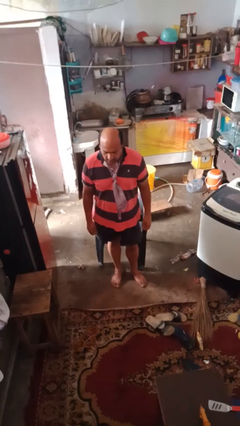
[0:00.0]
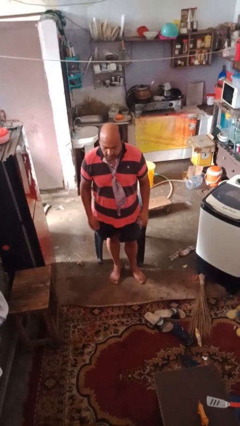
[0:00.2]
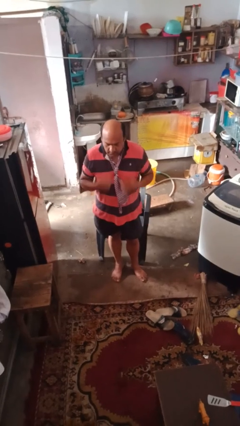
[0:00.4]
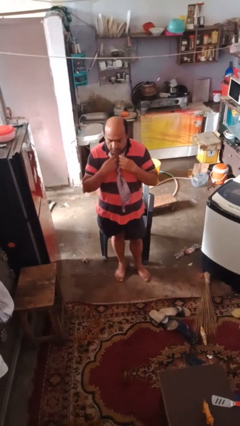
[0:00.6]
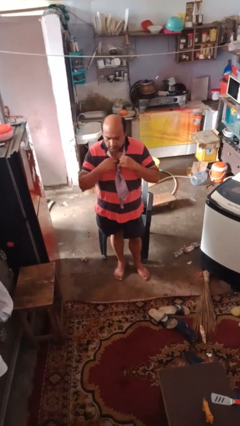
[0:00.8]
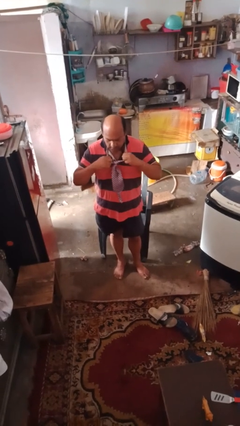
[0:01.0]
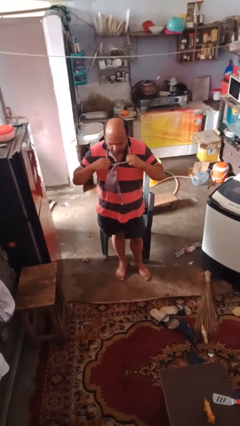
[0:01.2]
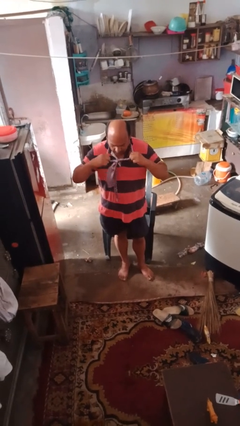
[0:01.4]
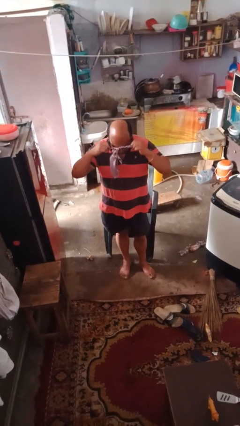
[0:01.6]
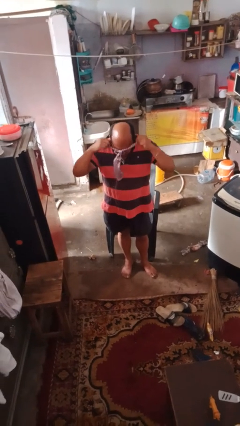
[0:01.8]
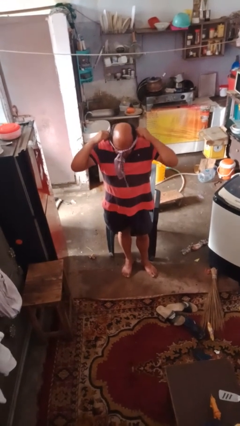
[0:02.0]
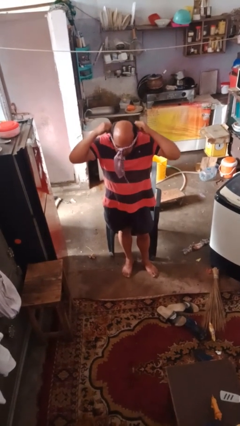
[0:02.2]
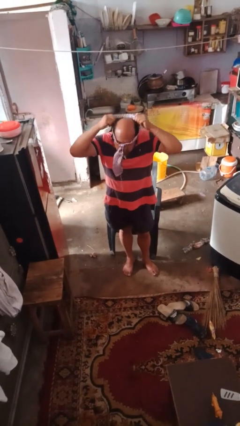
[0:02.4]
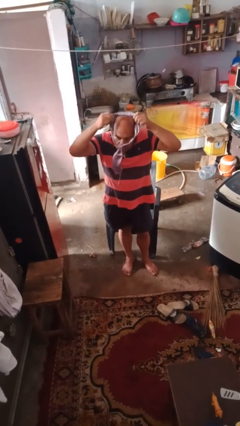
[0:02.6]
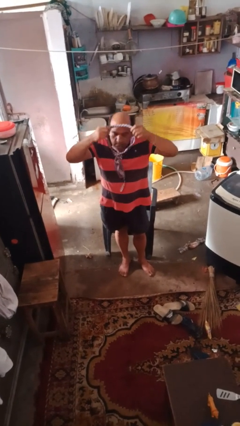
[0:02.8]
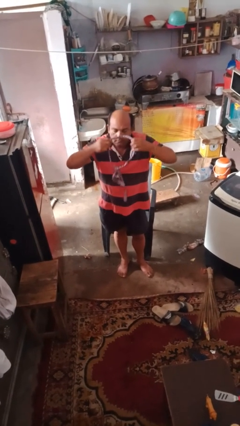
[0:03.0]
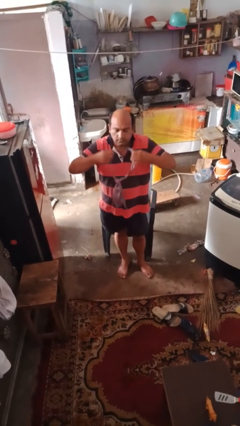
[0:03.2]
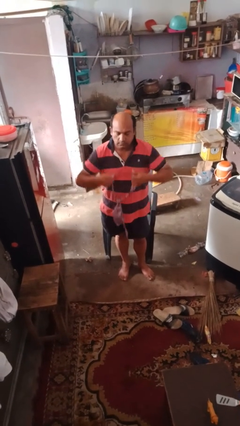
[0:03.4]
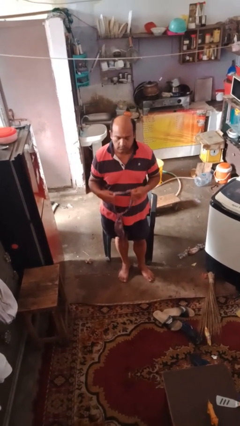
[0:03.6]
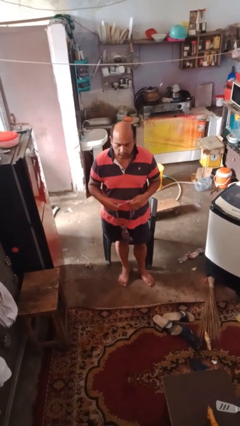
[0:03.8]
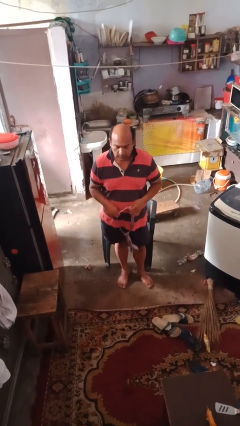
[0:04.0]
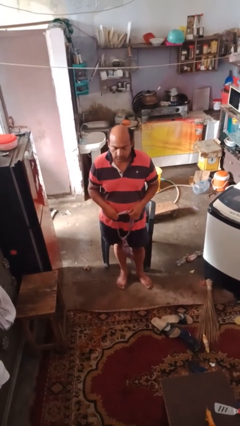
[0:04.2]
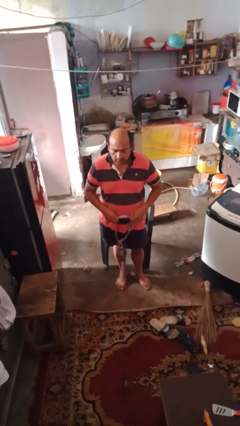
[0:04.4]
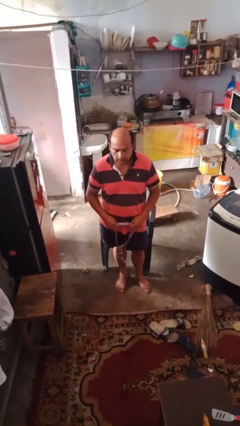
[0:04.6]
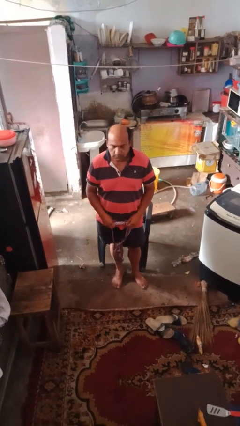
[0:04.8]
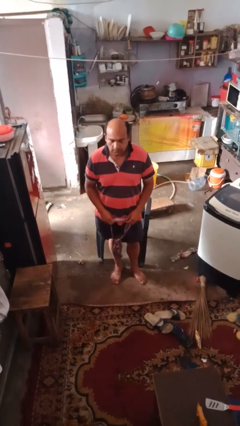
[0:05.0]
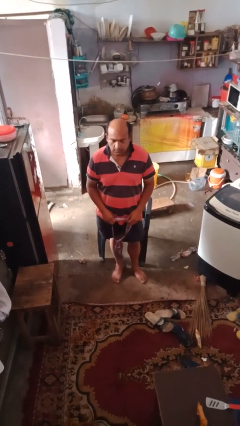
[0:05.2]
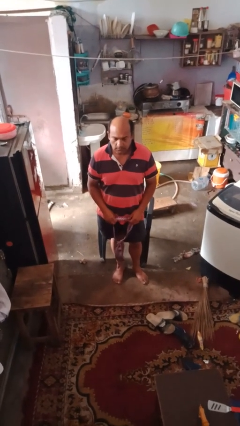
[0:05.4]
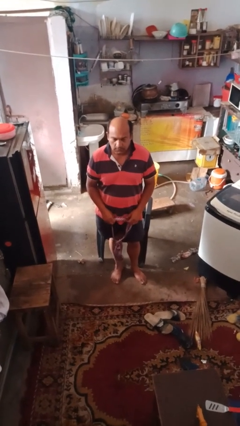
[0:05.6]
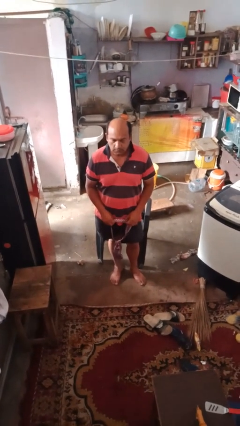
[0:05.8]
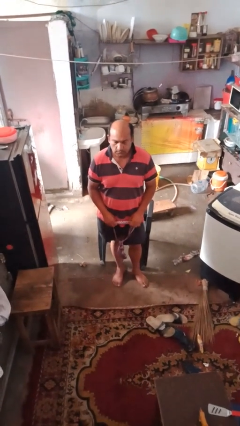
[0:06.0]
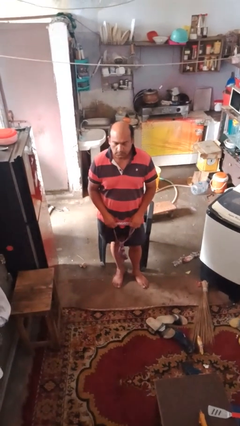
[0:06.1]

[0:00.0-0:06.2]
person takes off necktie

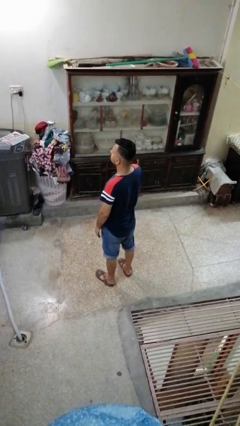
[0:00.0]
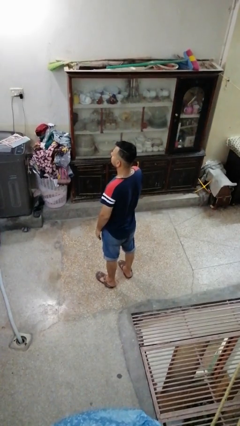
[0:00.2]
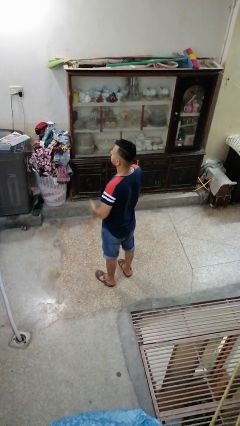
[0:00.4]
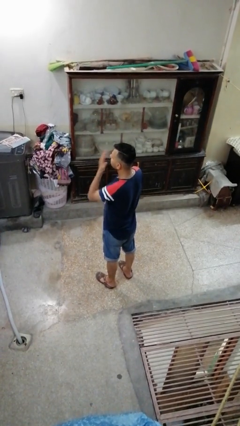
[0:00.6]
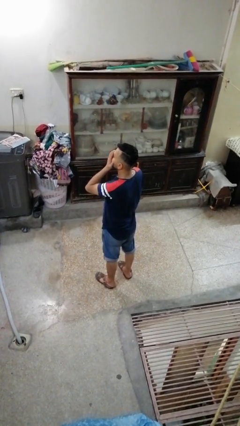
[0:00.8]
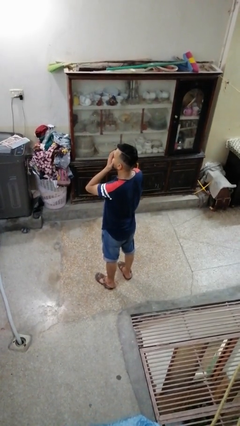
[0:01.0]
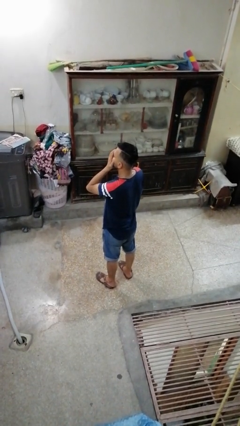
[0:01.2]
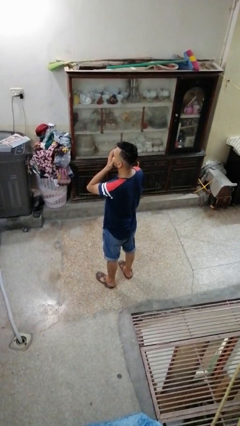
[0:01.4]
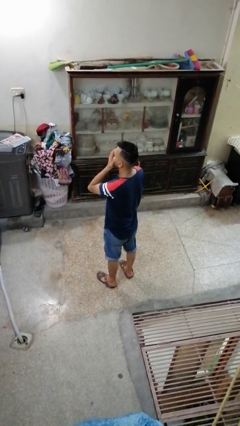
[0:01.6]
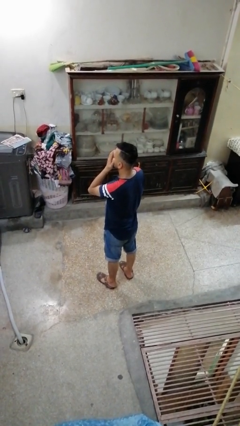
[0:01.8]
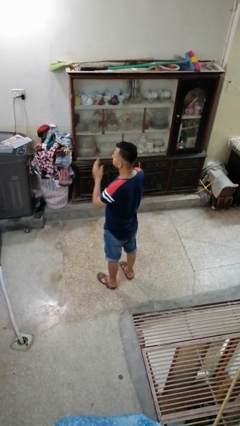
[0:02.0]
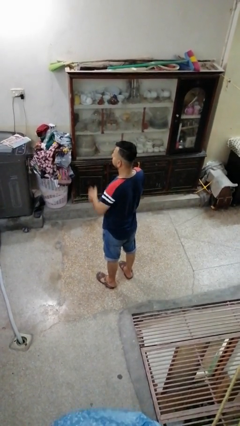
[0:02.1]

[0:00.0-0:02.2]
person covers face with hands

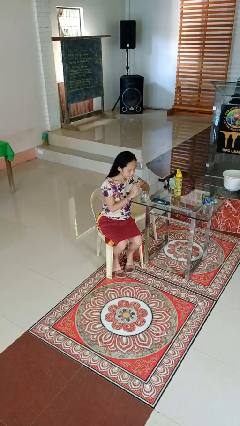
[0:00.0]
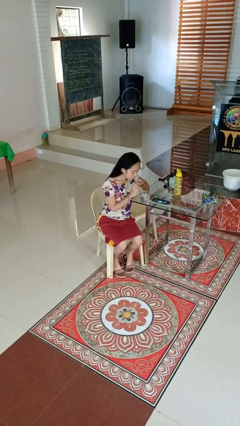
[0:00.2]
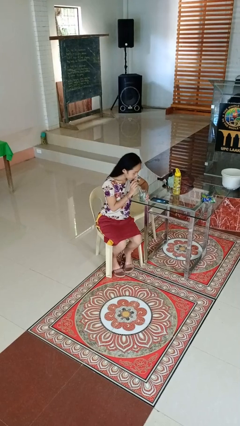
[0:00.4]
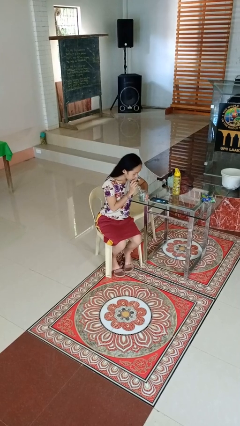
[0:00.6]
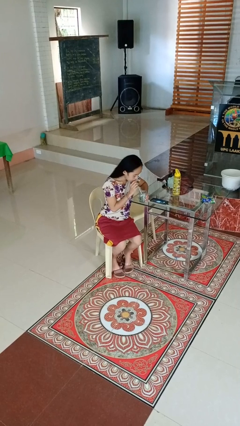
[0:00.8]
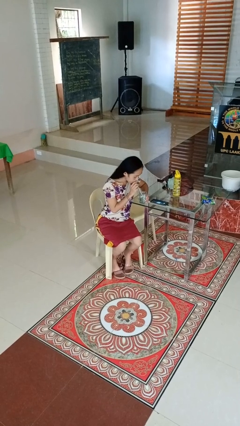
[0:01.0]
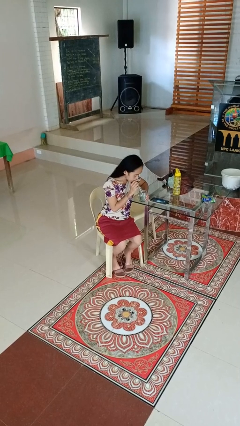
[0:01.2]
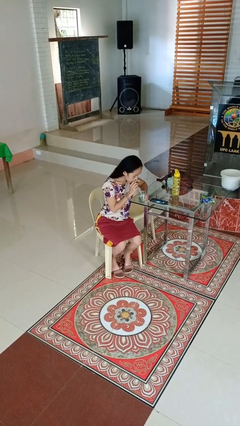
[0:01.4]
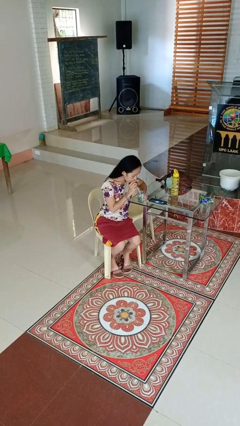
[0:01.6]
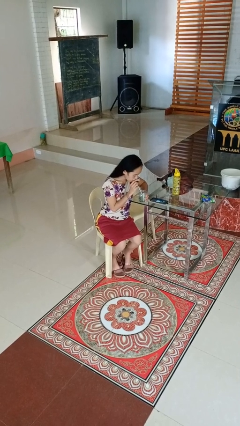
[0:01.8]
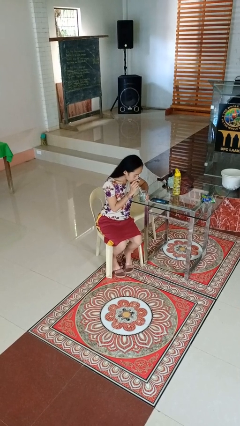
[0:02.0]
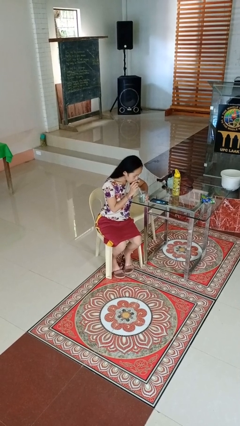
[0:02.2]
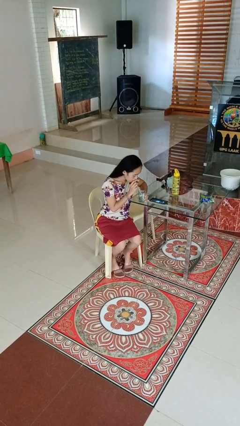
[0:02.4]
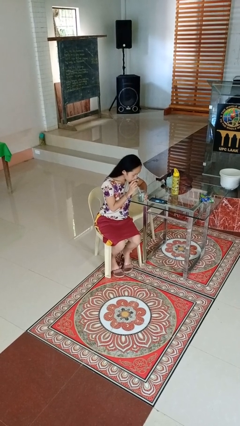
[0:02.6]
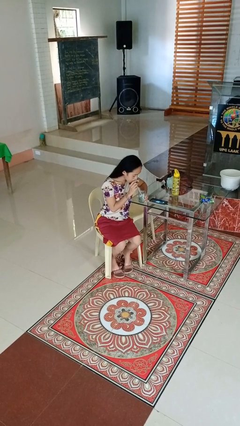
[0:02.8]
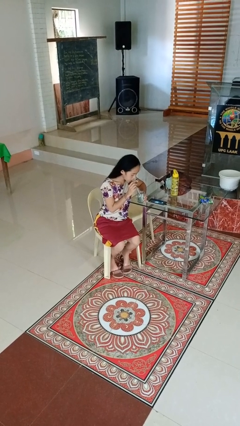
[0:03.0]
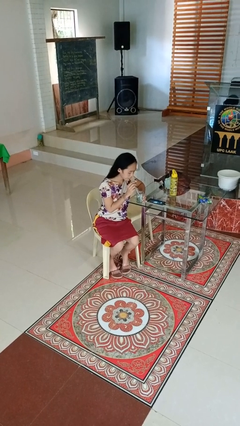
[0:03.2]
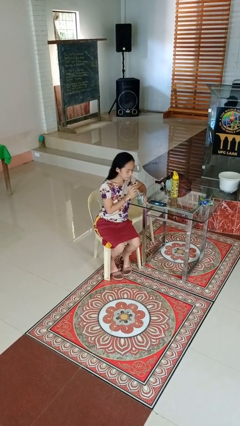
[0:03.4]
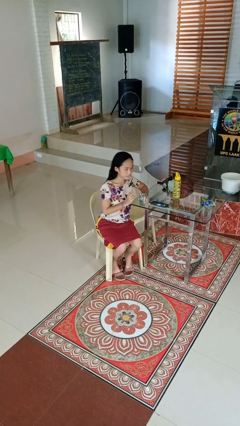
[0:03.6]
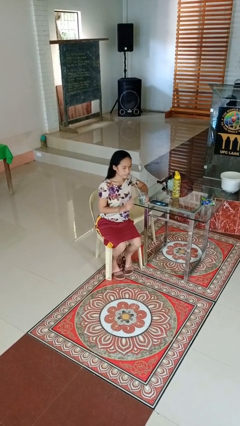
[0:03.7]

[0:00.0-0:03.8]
person drinks from straw

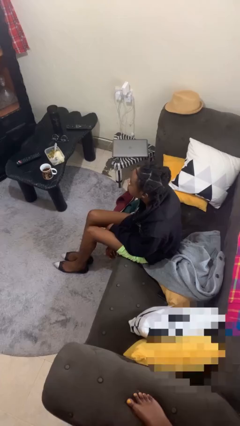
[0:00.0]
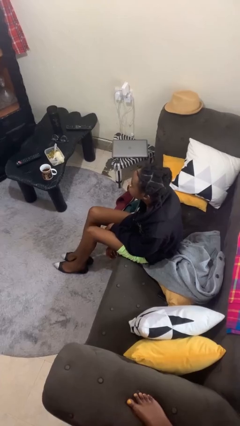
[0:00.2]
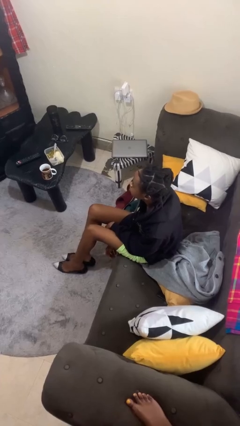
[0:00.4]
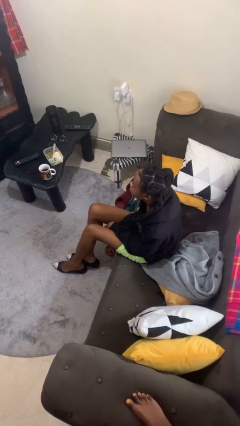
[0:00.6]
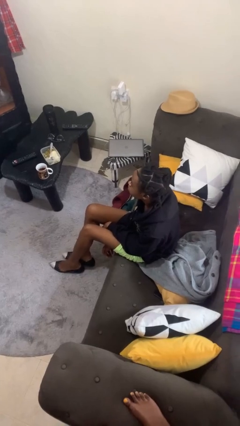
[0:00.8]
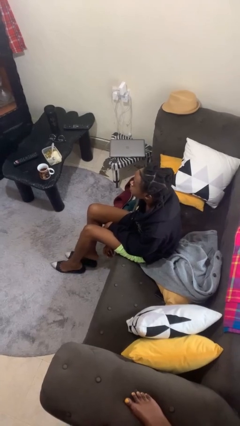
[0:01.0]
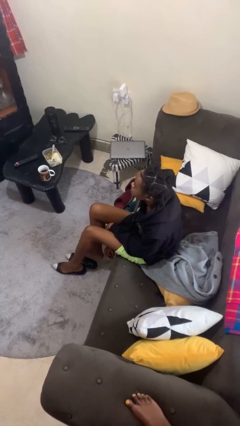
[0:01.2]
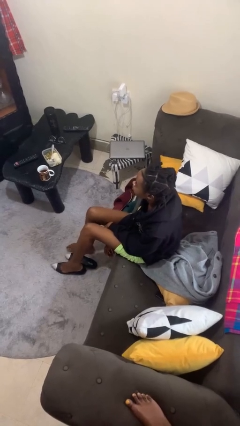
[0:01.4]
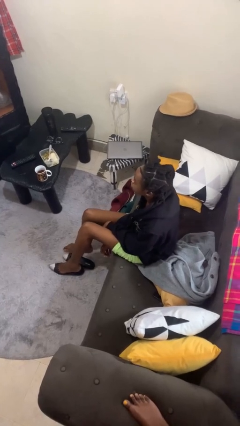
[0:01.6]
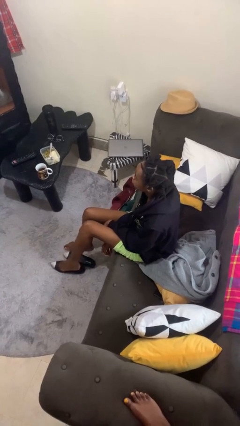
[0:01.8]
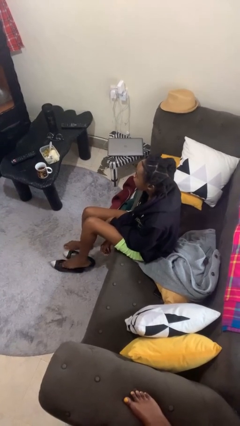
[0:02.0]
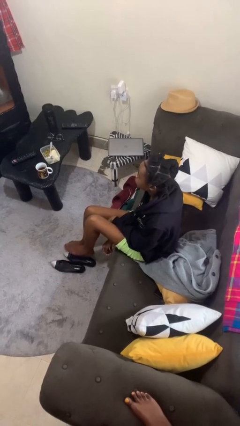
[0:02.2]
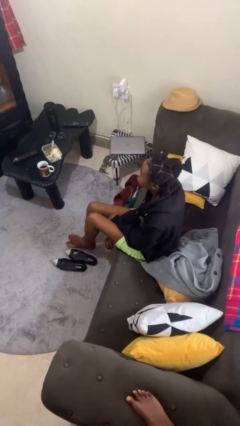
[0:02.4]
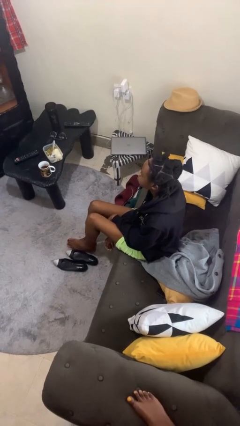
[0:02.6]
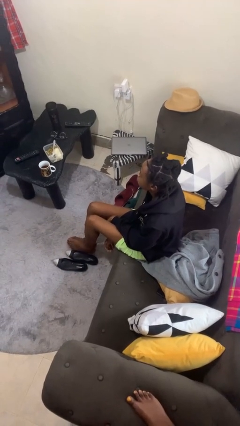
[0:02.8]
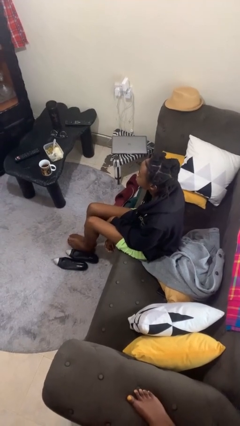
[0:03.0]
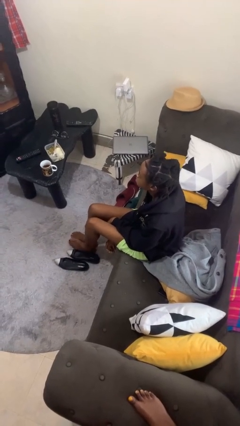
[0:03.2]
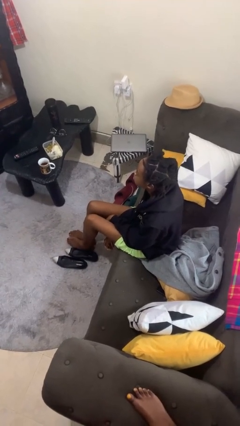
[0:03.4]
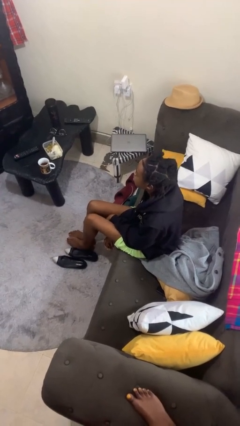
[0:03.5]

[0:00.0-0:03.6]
person takes off shoes

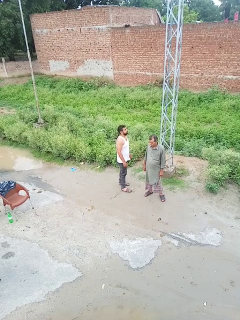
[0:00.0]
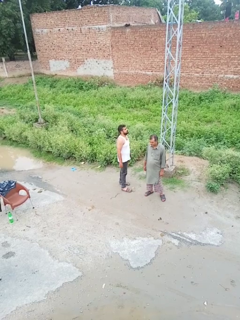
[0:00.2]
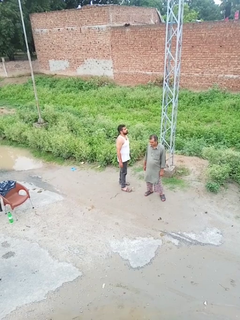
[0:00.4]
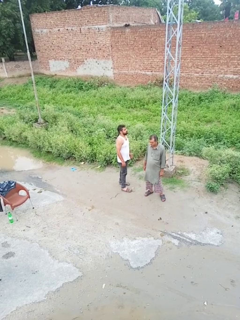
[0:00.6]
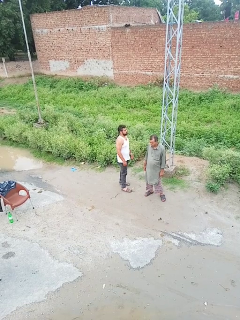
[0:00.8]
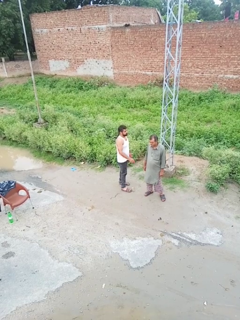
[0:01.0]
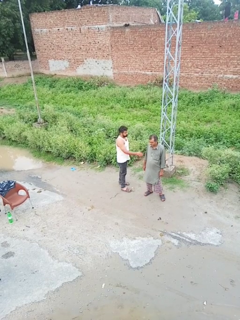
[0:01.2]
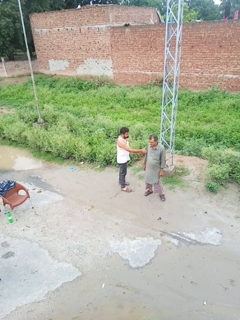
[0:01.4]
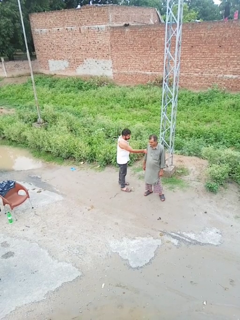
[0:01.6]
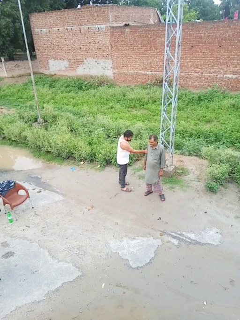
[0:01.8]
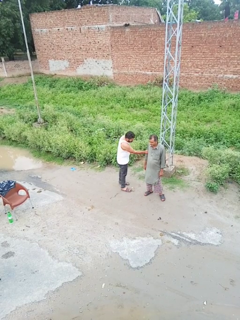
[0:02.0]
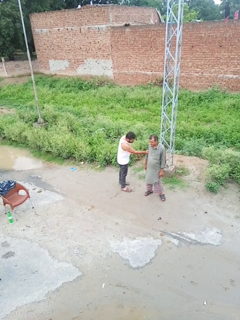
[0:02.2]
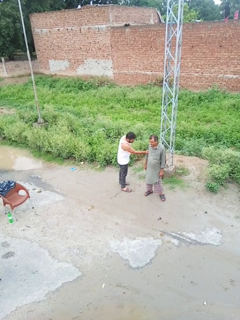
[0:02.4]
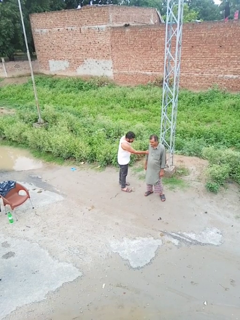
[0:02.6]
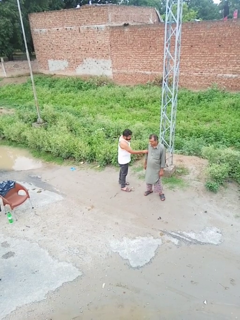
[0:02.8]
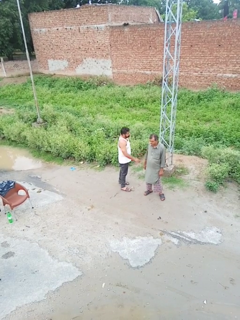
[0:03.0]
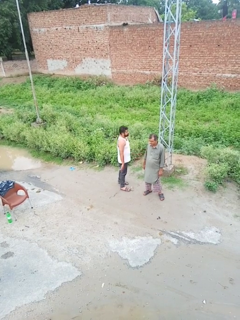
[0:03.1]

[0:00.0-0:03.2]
person grabs person by bicep
